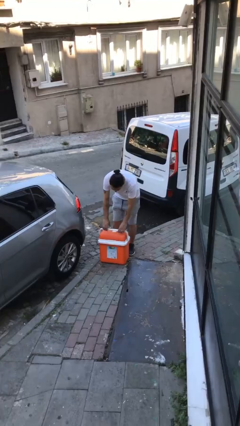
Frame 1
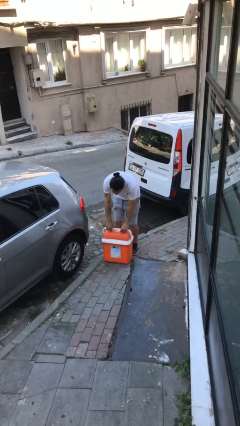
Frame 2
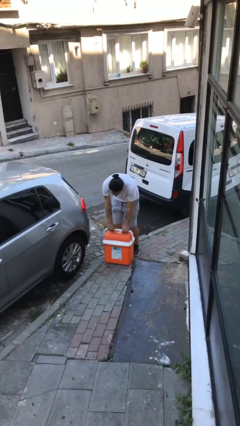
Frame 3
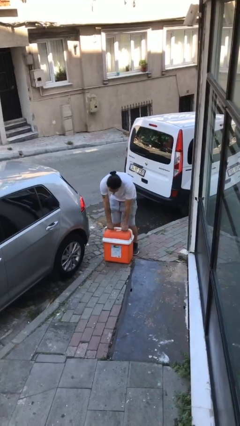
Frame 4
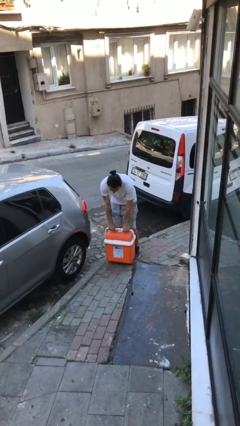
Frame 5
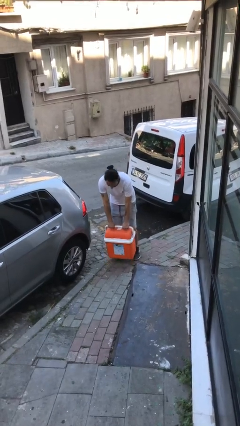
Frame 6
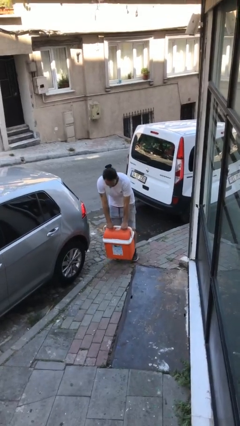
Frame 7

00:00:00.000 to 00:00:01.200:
person picks up object from floor

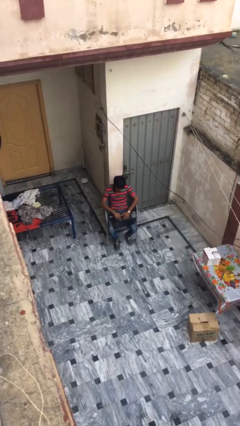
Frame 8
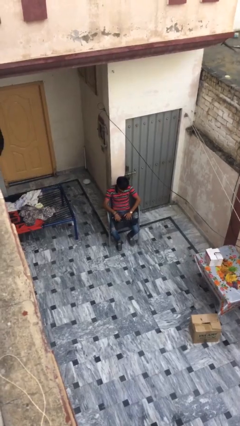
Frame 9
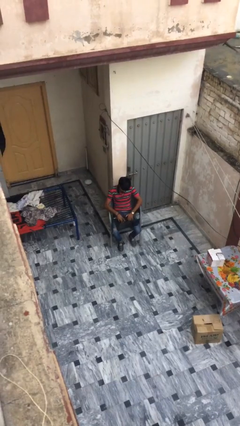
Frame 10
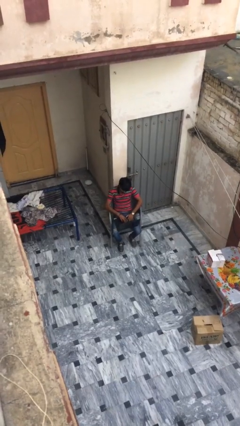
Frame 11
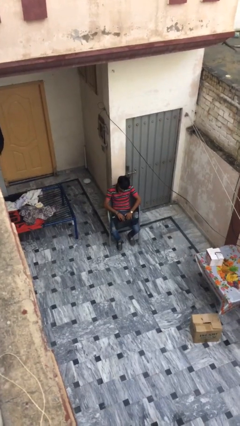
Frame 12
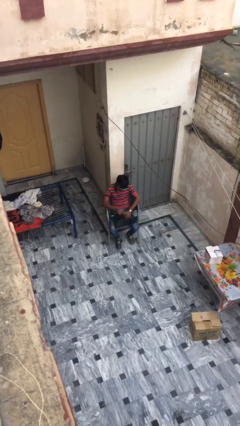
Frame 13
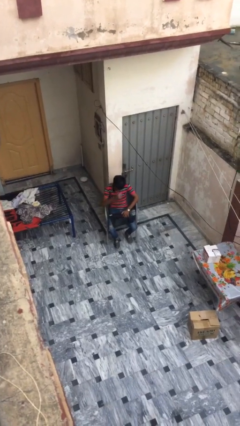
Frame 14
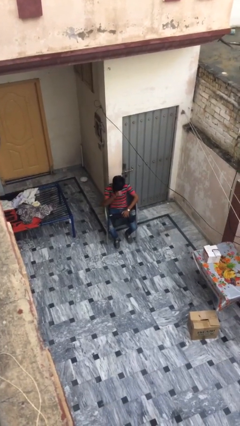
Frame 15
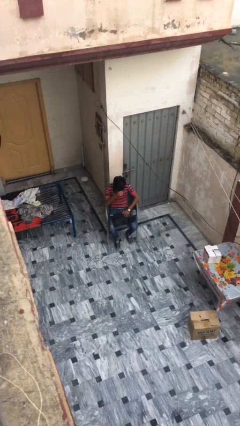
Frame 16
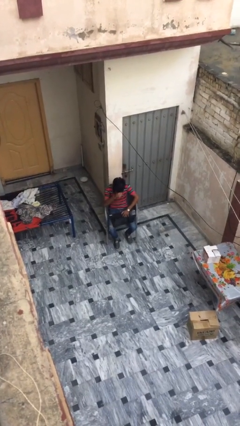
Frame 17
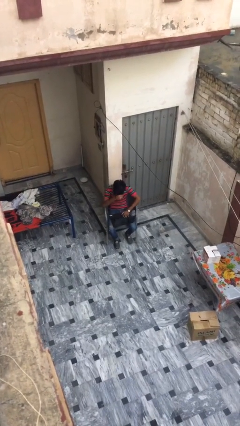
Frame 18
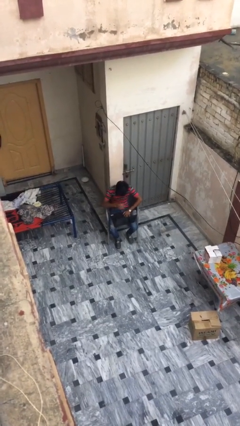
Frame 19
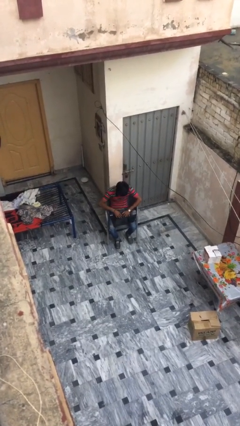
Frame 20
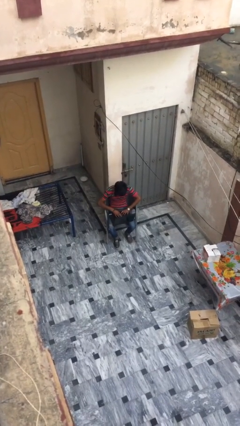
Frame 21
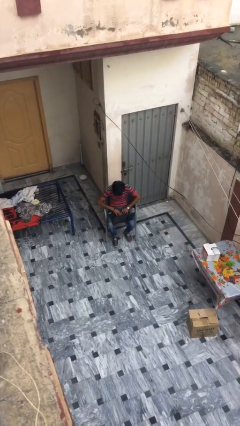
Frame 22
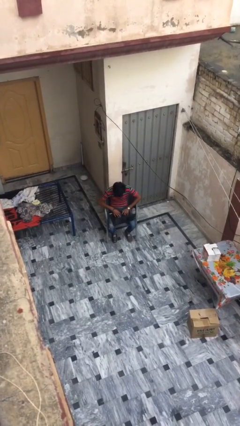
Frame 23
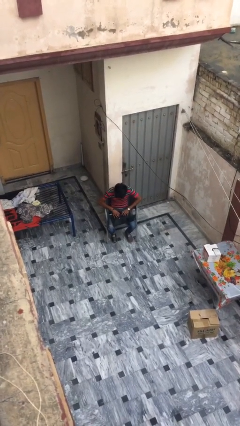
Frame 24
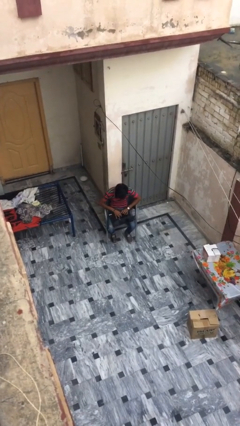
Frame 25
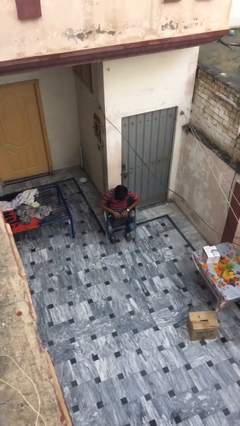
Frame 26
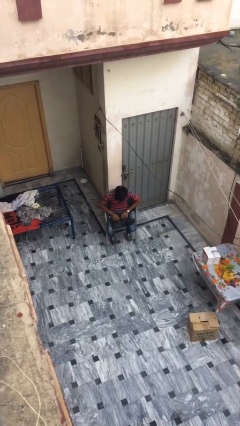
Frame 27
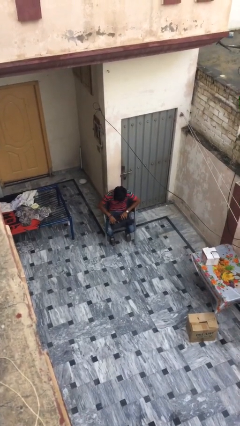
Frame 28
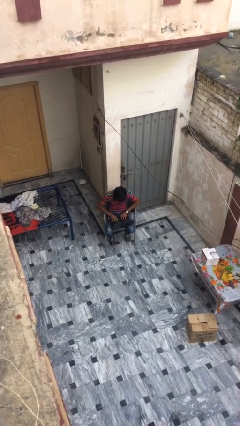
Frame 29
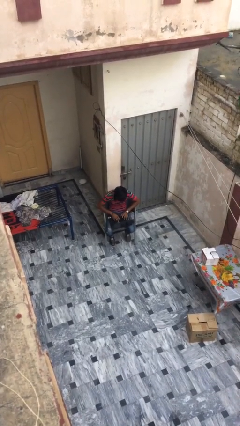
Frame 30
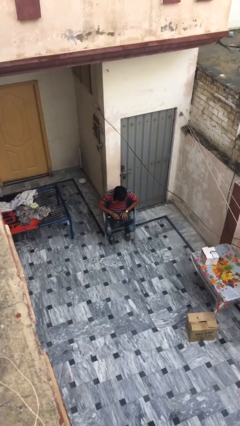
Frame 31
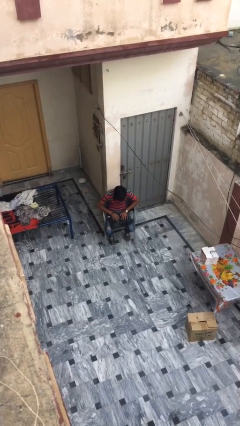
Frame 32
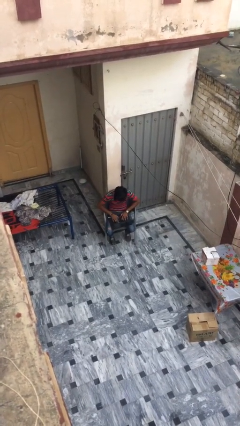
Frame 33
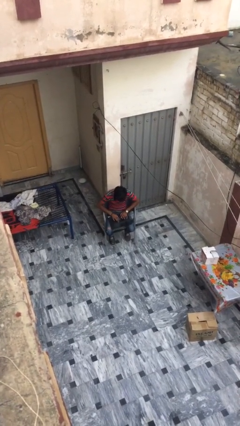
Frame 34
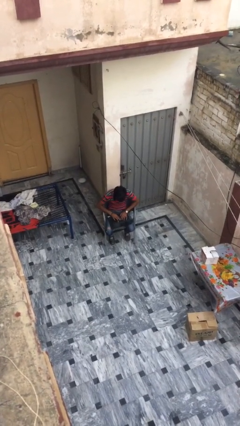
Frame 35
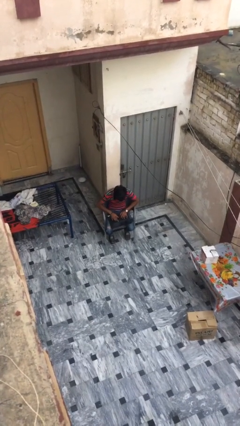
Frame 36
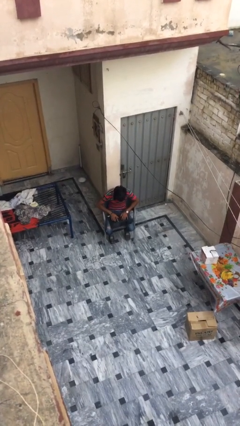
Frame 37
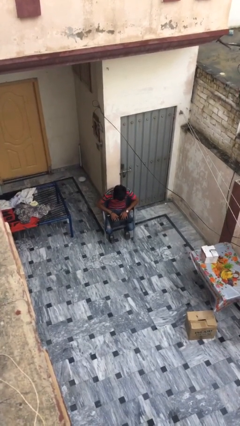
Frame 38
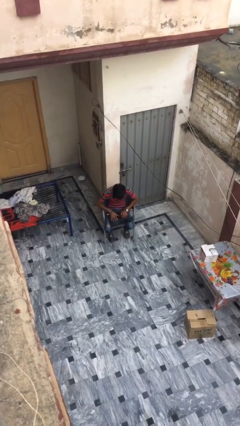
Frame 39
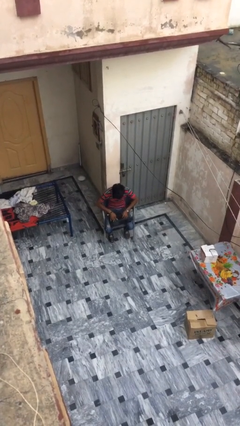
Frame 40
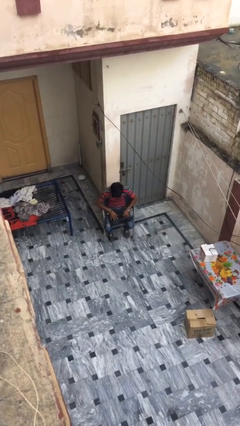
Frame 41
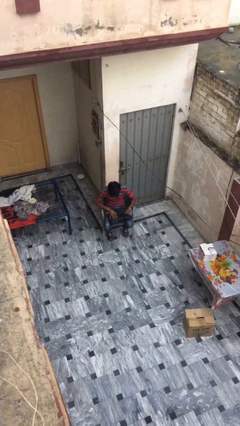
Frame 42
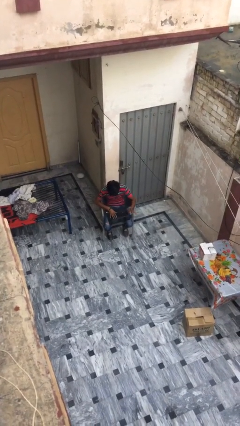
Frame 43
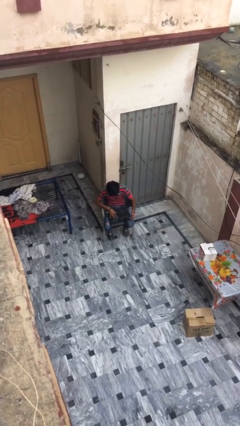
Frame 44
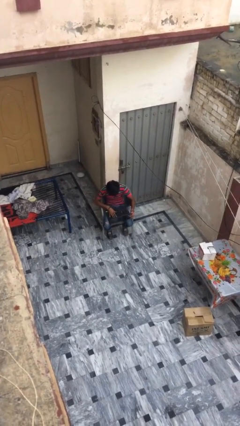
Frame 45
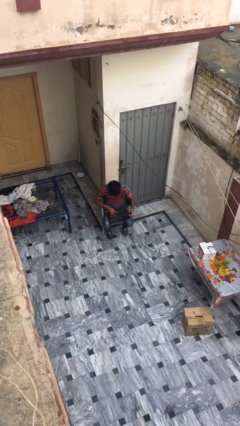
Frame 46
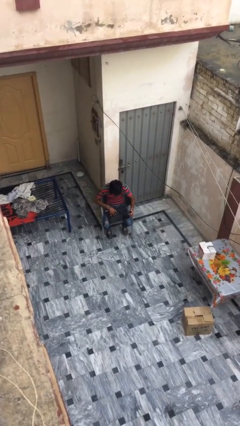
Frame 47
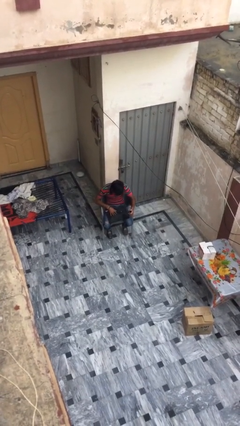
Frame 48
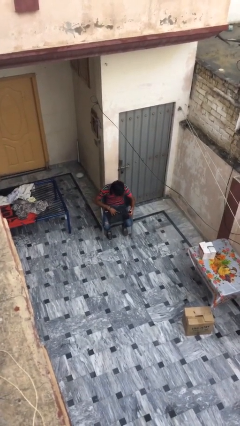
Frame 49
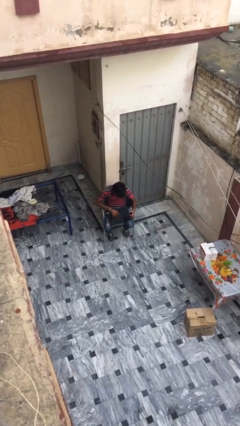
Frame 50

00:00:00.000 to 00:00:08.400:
person interacts with laptop

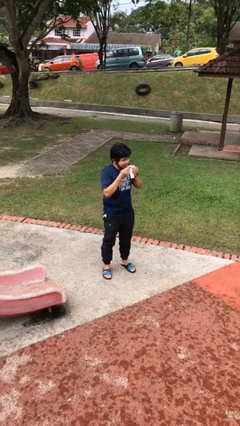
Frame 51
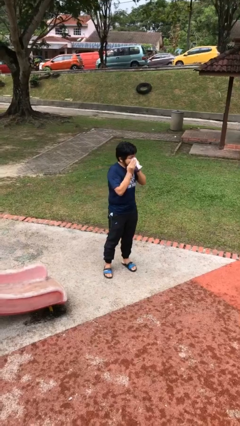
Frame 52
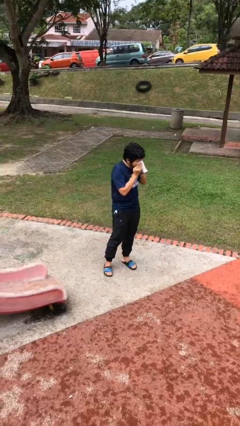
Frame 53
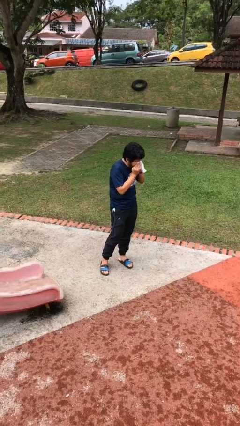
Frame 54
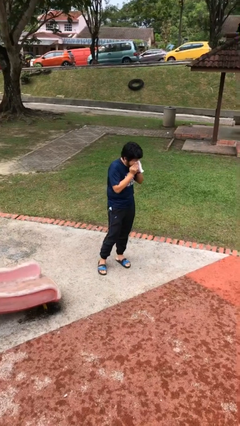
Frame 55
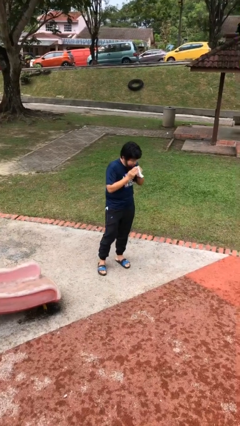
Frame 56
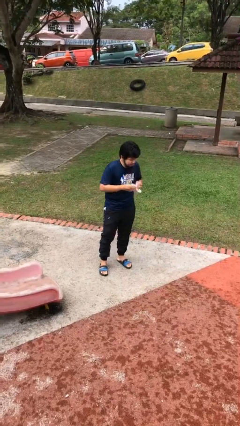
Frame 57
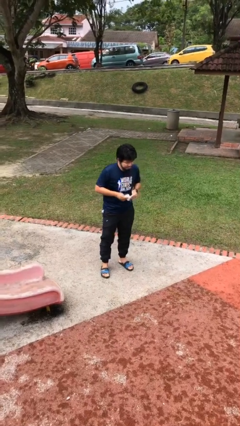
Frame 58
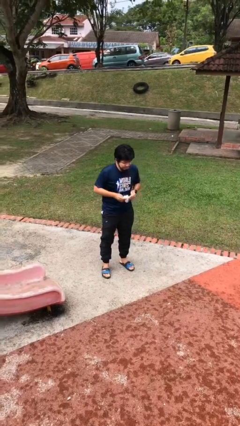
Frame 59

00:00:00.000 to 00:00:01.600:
person blows nose

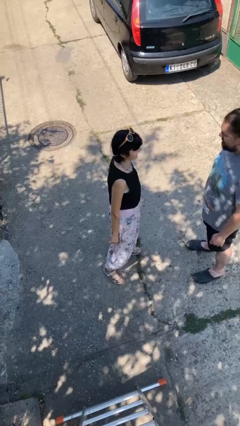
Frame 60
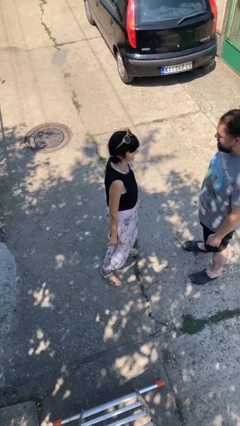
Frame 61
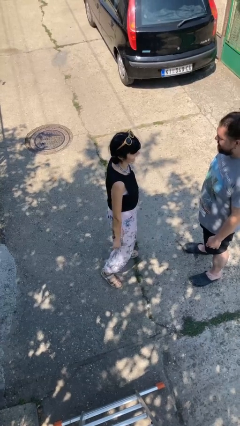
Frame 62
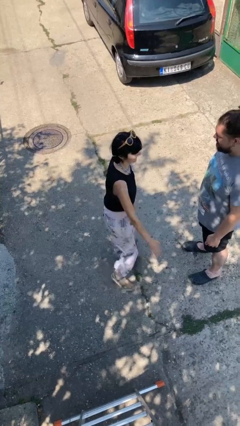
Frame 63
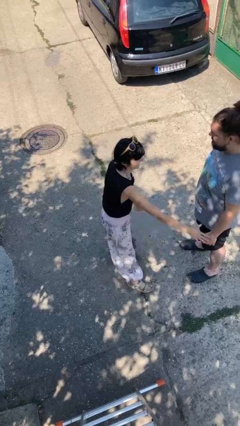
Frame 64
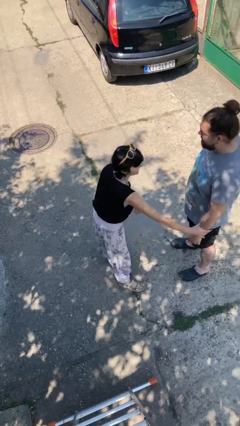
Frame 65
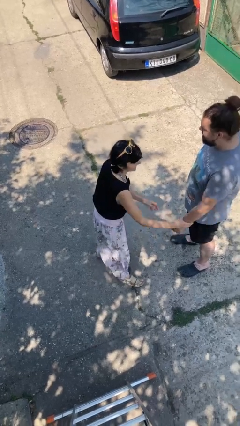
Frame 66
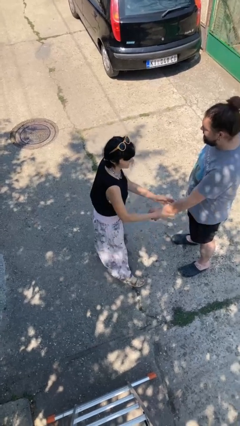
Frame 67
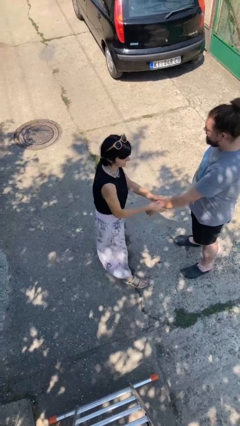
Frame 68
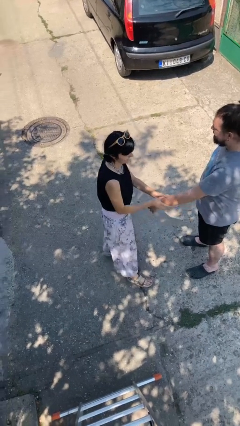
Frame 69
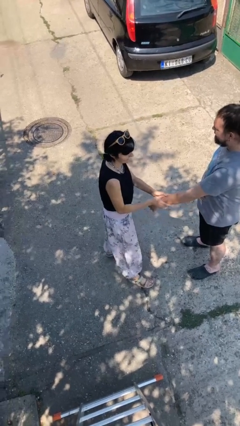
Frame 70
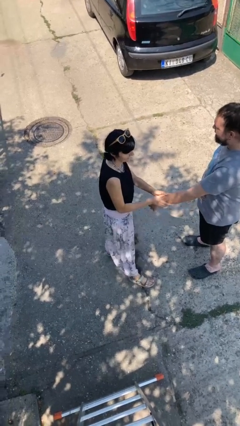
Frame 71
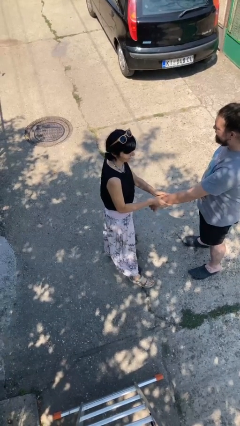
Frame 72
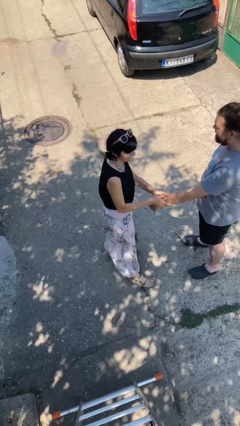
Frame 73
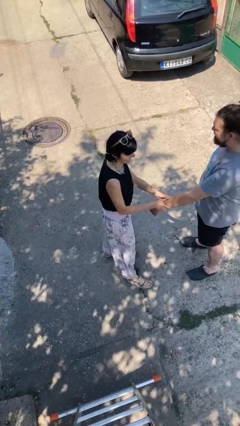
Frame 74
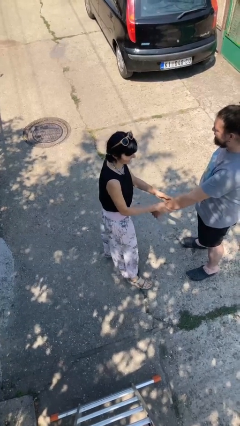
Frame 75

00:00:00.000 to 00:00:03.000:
person grabs person by forearm

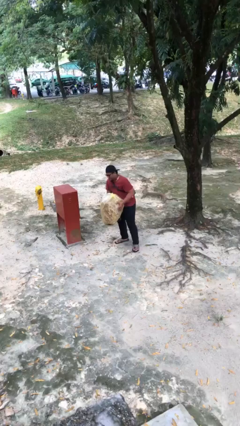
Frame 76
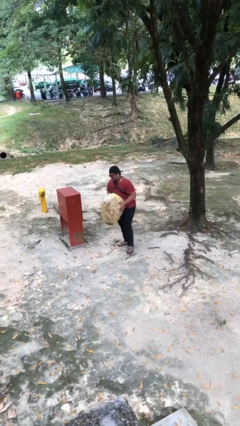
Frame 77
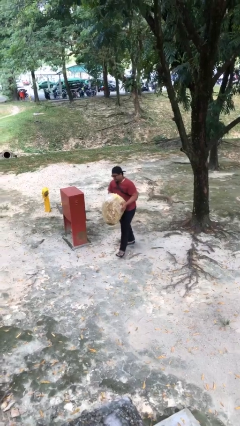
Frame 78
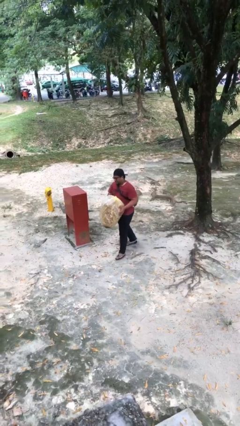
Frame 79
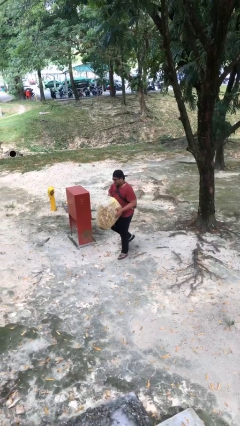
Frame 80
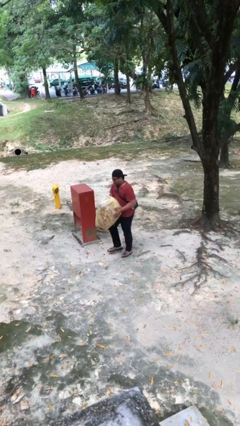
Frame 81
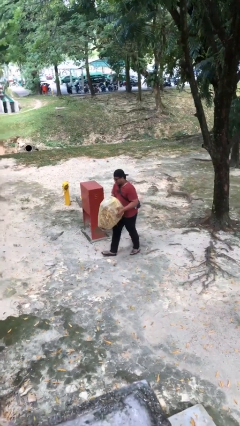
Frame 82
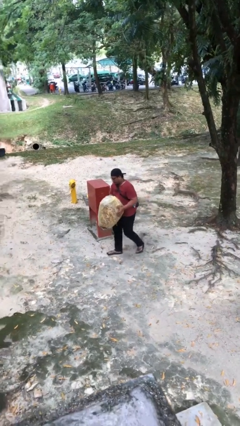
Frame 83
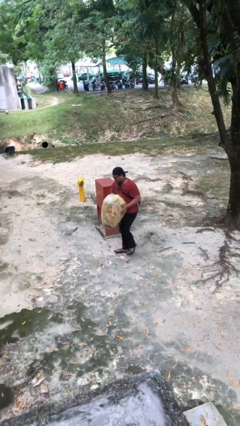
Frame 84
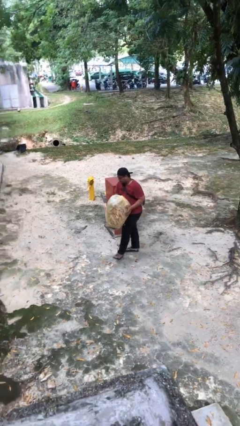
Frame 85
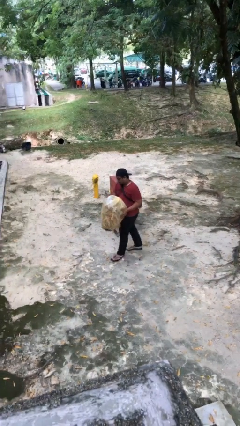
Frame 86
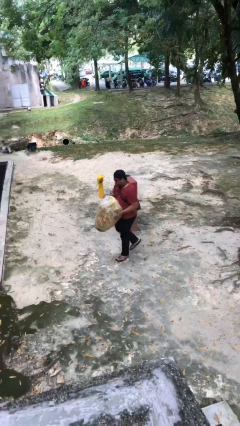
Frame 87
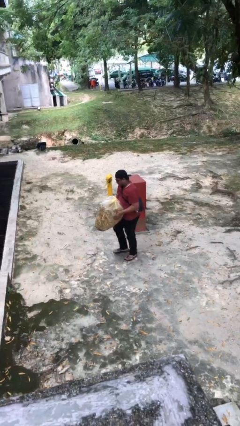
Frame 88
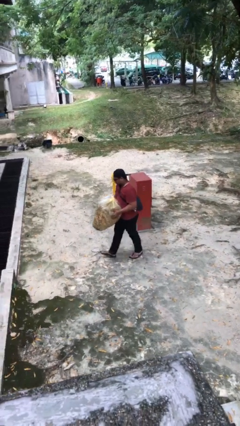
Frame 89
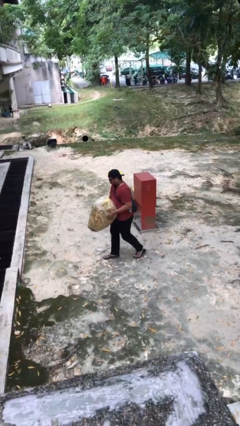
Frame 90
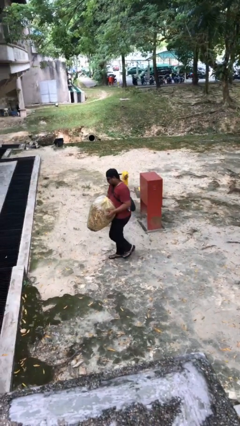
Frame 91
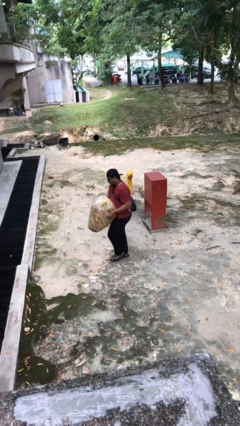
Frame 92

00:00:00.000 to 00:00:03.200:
person carries heavy object

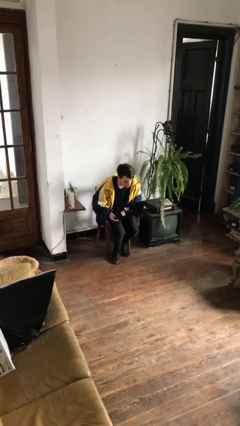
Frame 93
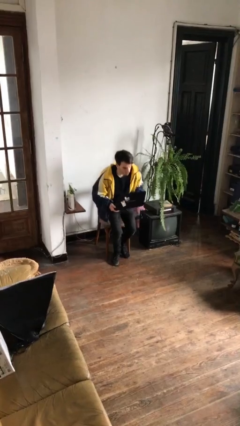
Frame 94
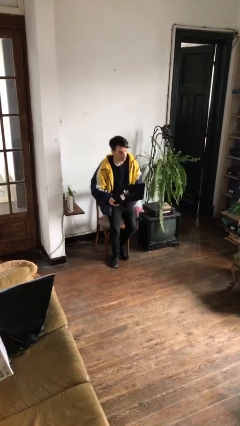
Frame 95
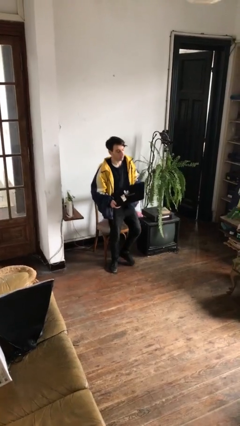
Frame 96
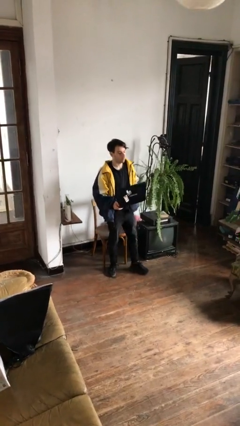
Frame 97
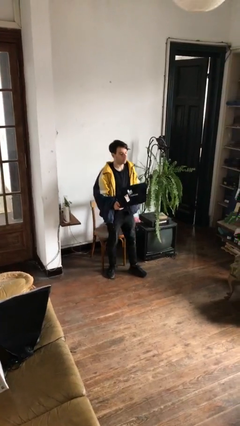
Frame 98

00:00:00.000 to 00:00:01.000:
person stands up
